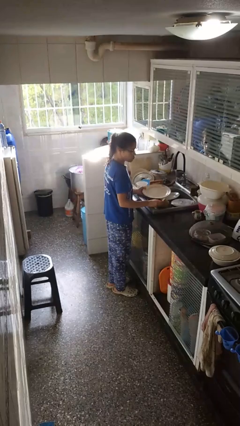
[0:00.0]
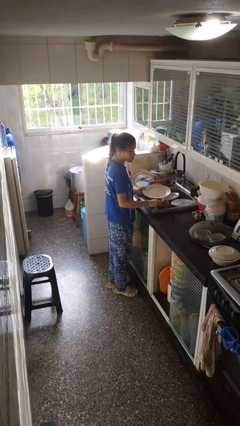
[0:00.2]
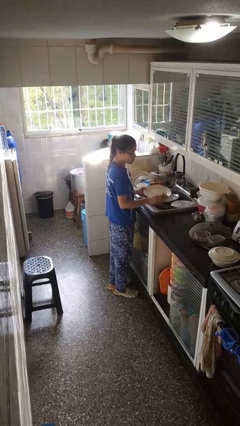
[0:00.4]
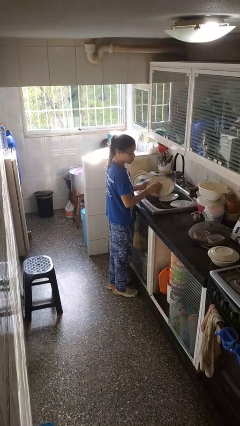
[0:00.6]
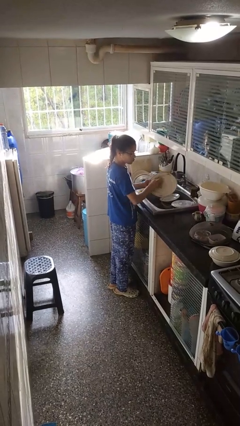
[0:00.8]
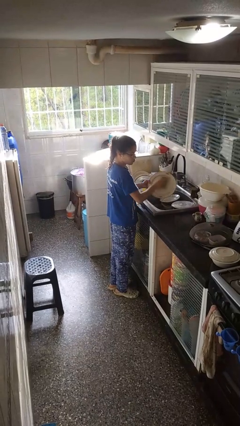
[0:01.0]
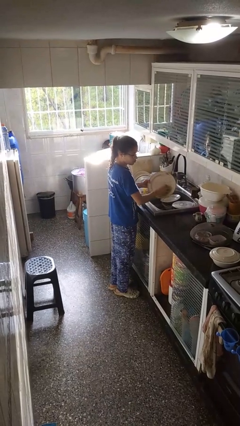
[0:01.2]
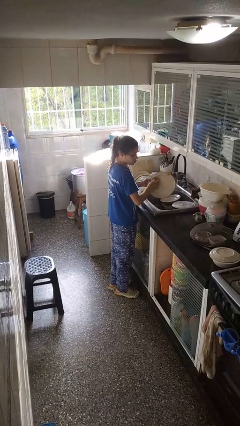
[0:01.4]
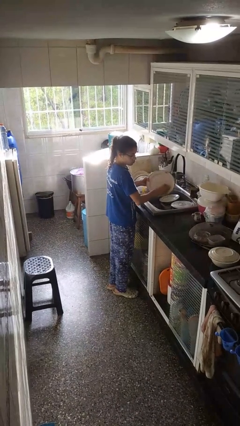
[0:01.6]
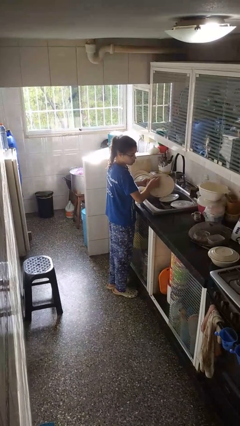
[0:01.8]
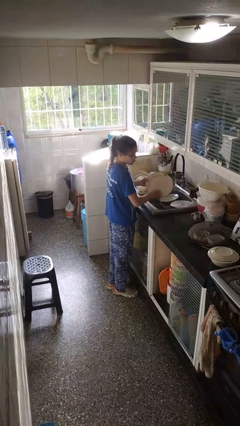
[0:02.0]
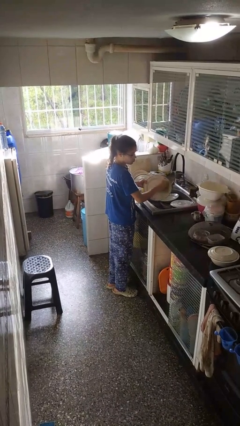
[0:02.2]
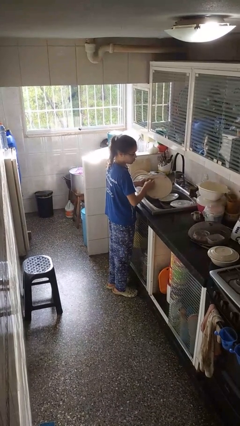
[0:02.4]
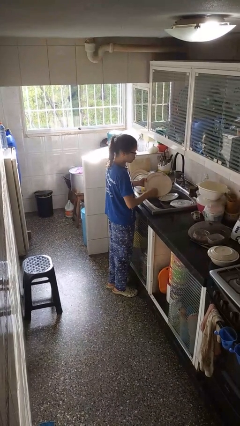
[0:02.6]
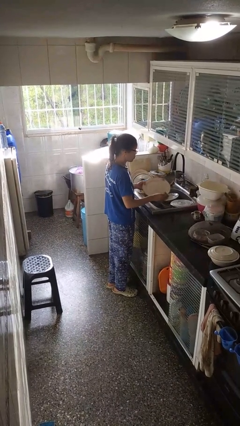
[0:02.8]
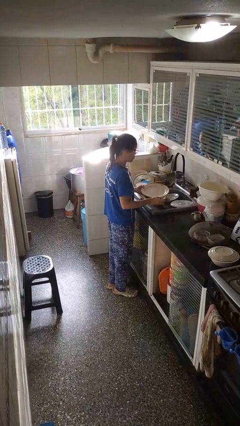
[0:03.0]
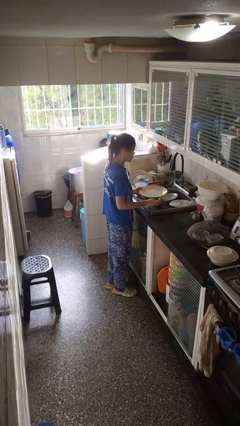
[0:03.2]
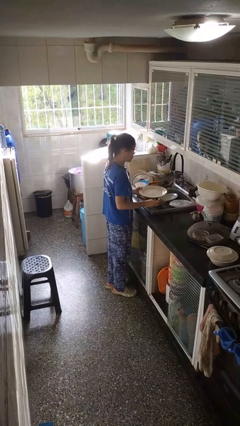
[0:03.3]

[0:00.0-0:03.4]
person washes dish

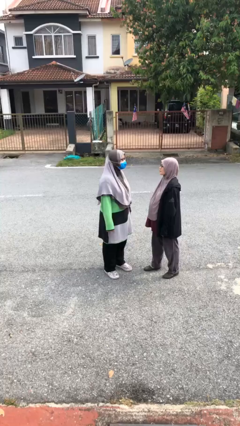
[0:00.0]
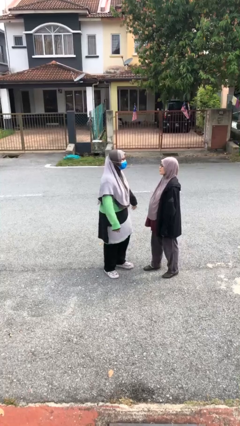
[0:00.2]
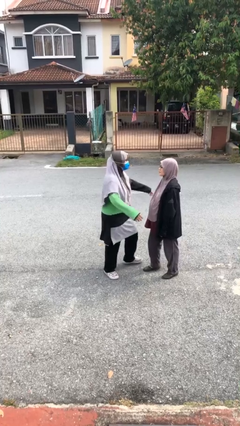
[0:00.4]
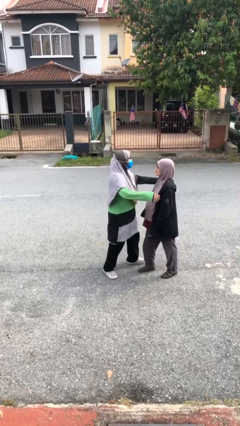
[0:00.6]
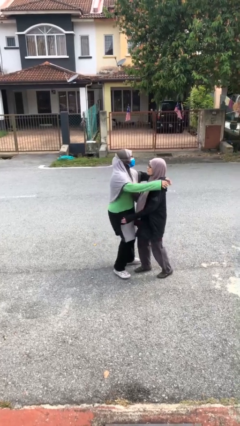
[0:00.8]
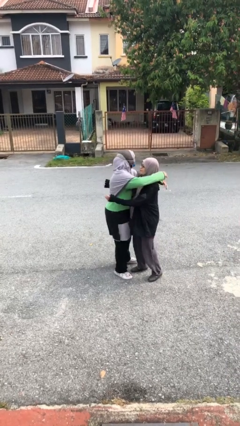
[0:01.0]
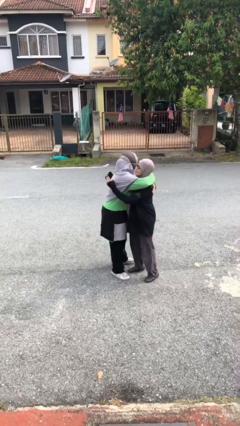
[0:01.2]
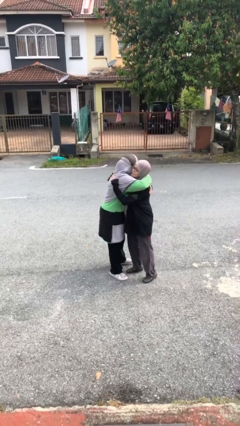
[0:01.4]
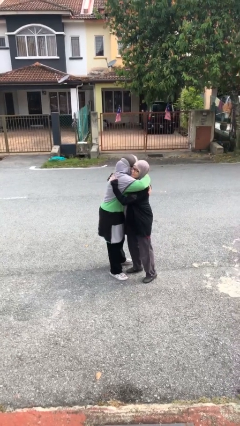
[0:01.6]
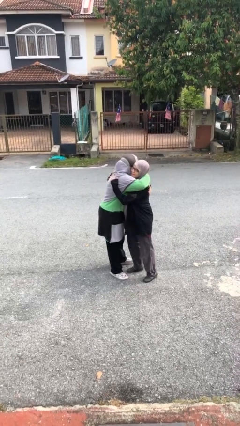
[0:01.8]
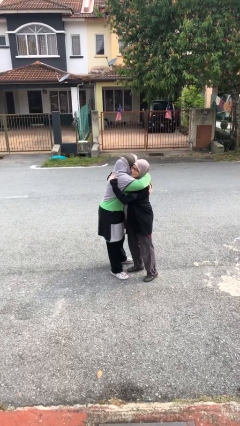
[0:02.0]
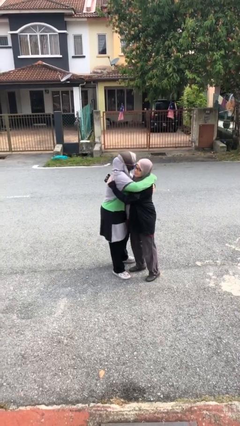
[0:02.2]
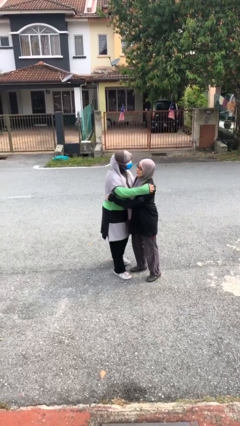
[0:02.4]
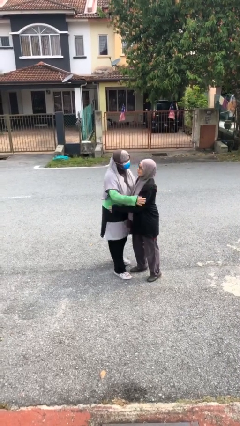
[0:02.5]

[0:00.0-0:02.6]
person embraces person

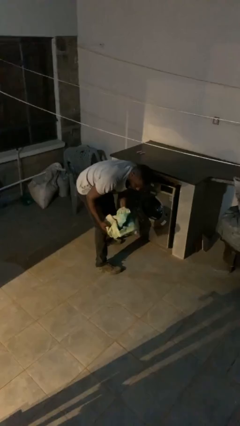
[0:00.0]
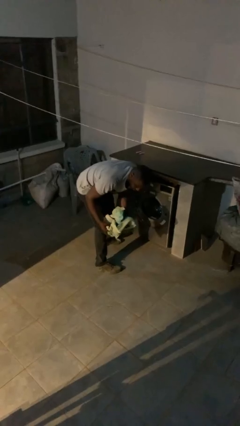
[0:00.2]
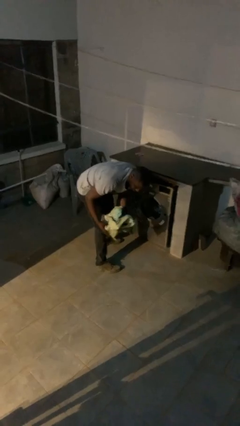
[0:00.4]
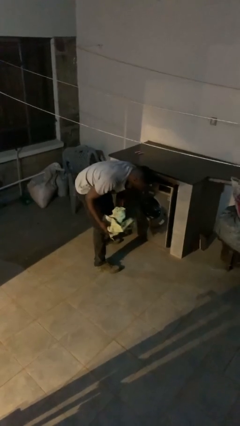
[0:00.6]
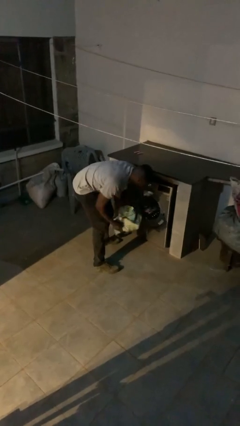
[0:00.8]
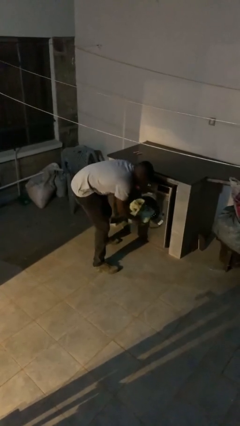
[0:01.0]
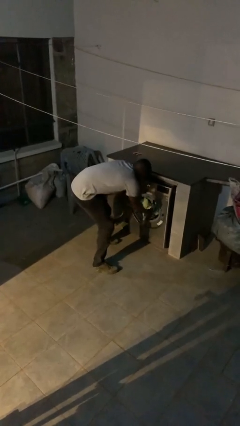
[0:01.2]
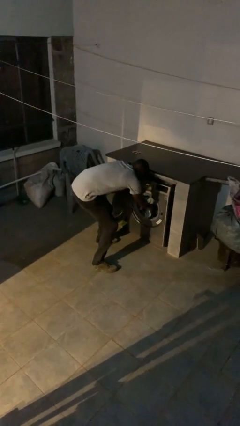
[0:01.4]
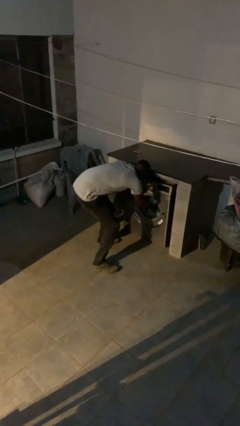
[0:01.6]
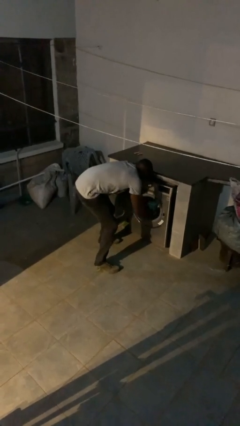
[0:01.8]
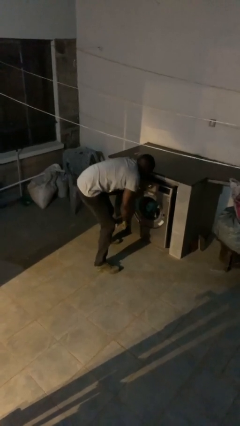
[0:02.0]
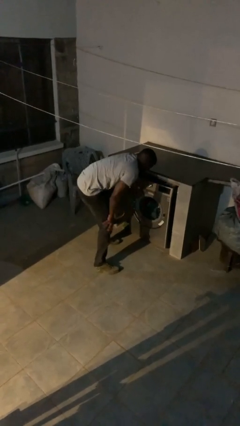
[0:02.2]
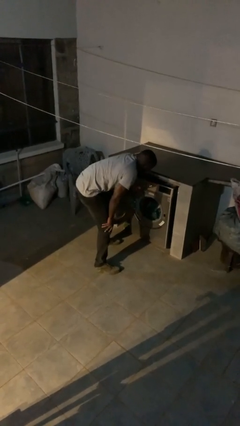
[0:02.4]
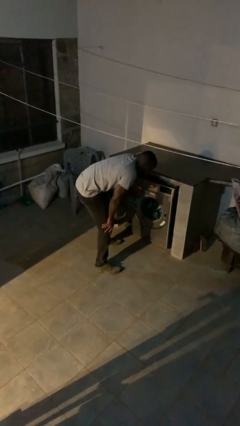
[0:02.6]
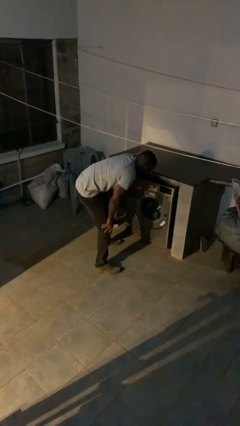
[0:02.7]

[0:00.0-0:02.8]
person loads clotheswasher

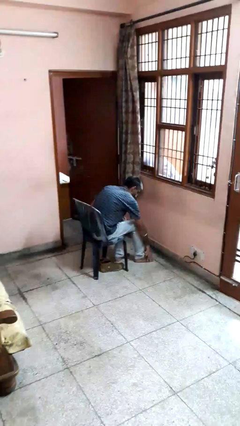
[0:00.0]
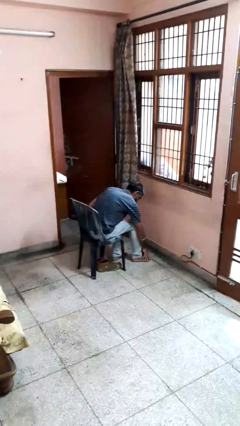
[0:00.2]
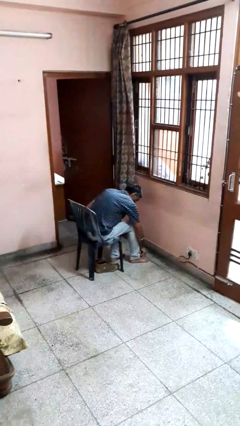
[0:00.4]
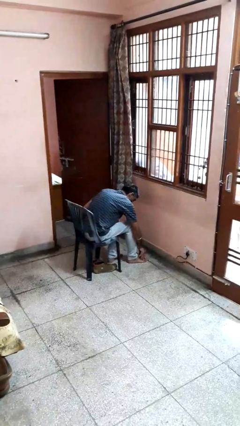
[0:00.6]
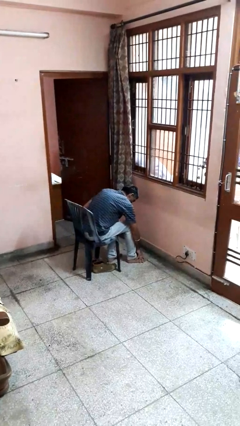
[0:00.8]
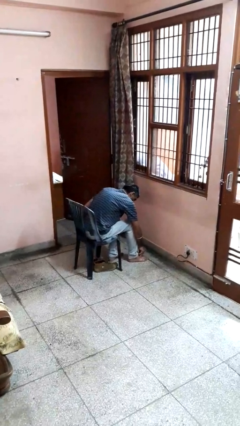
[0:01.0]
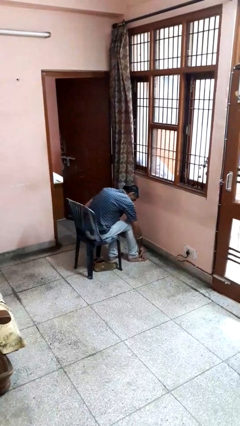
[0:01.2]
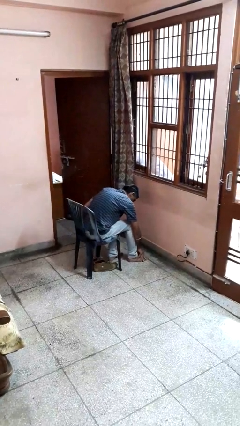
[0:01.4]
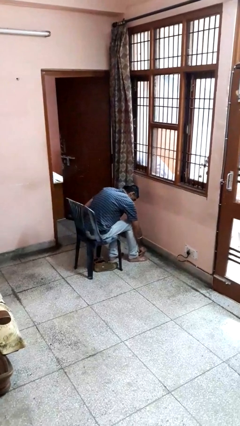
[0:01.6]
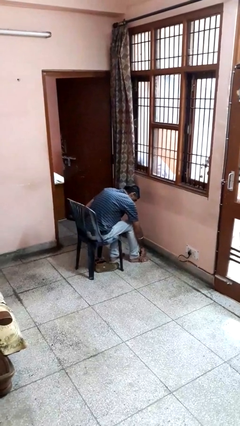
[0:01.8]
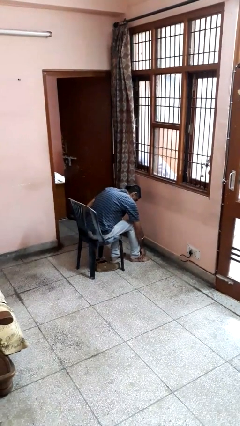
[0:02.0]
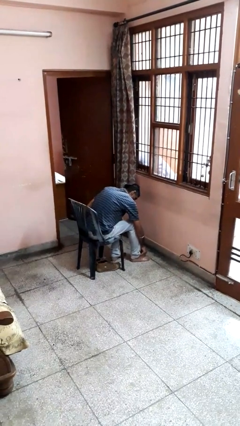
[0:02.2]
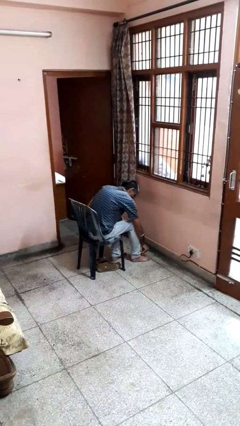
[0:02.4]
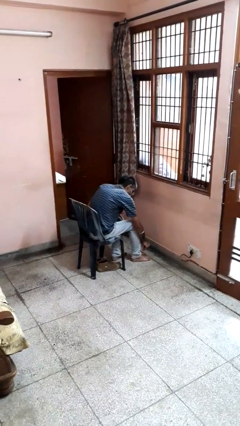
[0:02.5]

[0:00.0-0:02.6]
person rubs foot

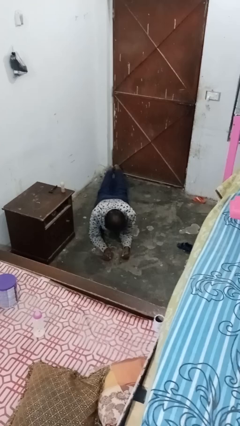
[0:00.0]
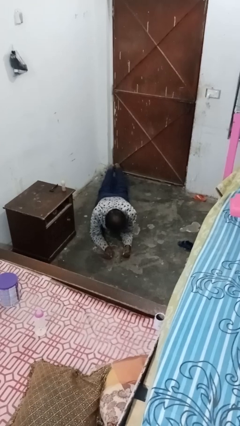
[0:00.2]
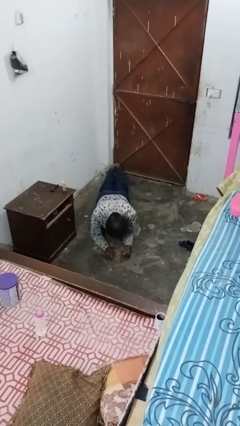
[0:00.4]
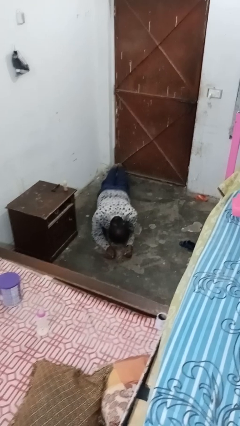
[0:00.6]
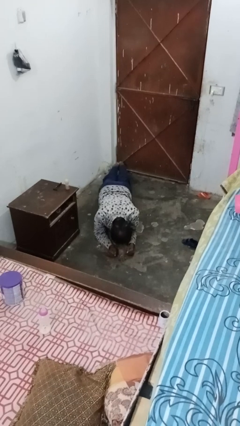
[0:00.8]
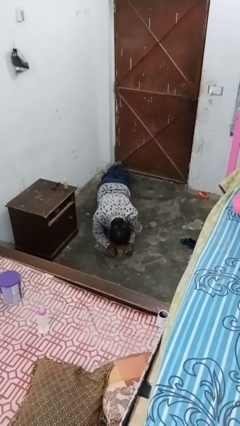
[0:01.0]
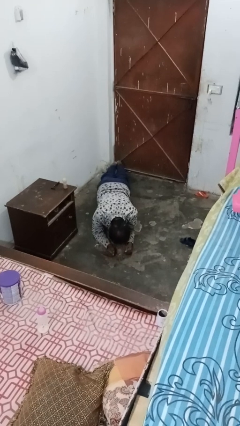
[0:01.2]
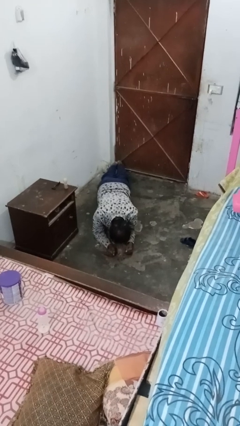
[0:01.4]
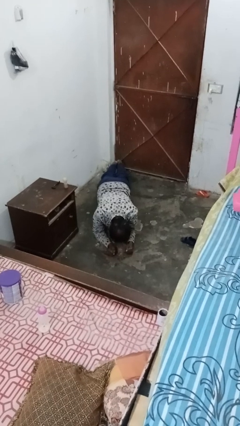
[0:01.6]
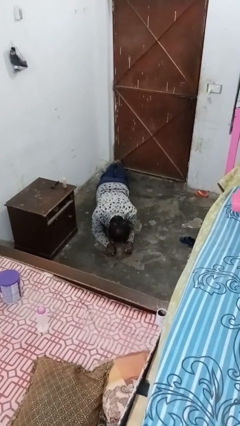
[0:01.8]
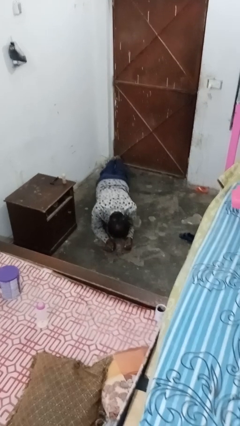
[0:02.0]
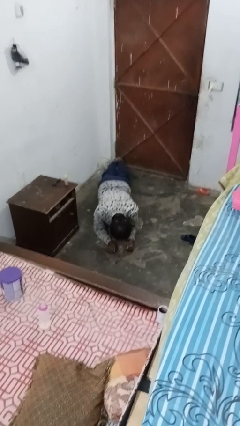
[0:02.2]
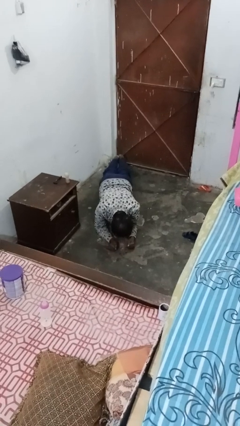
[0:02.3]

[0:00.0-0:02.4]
person exercises with plank

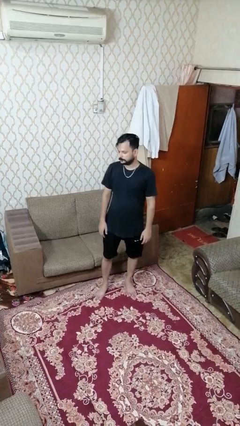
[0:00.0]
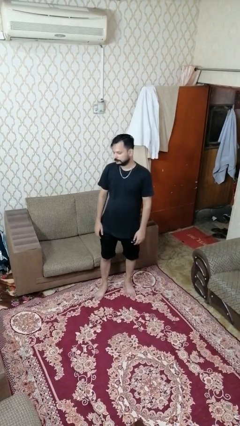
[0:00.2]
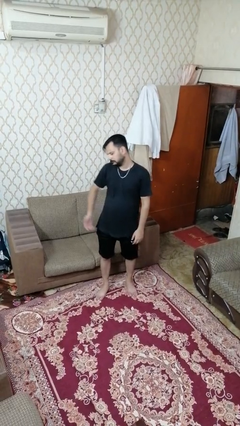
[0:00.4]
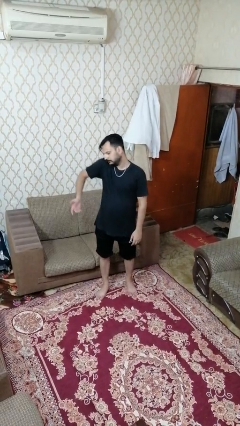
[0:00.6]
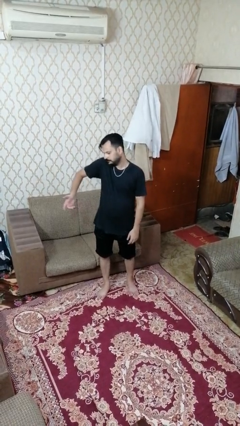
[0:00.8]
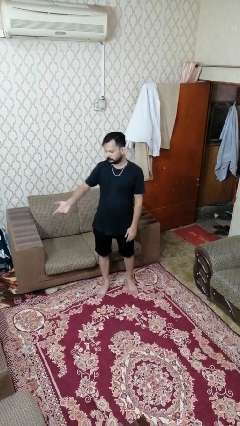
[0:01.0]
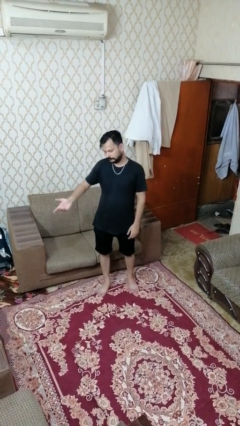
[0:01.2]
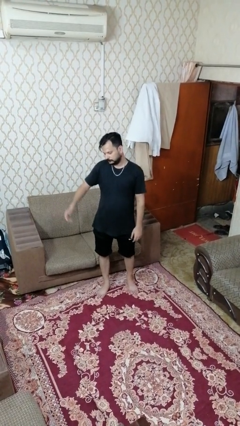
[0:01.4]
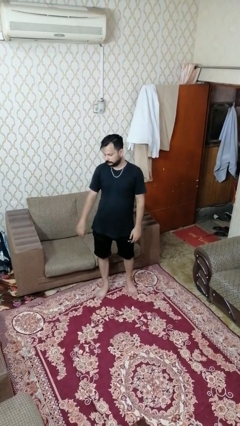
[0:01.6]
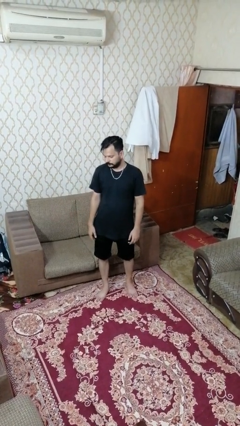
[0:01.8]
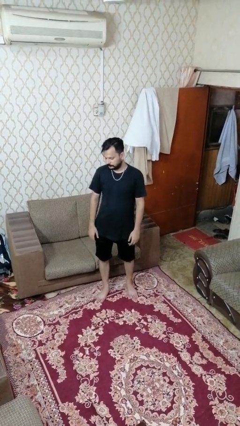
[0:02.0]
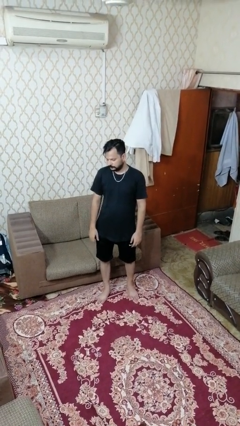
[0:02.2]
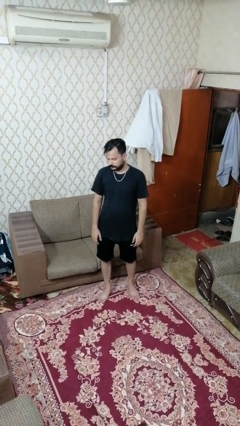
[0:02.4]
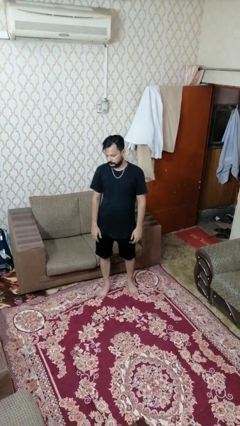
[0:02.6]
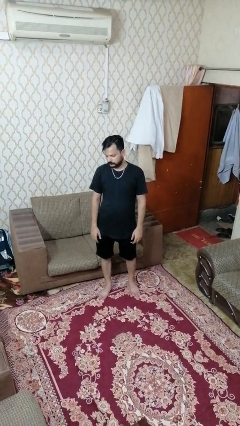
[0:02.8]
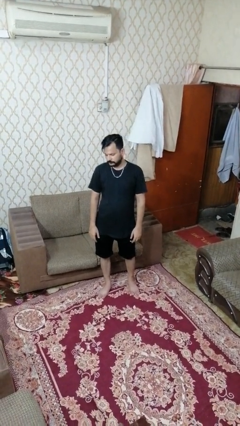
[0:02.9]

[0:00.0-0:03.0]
person shrugs

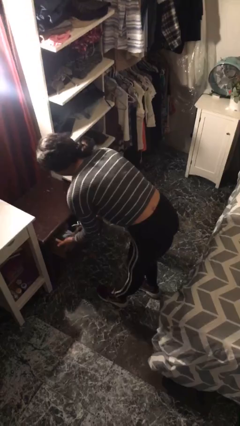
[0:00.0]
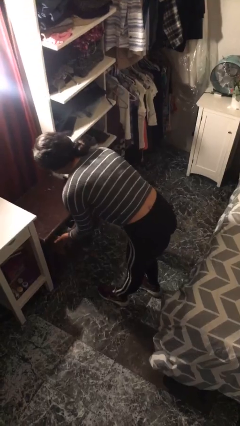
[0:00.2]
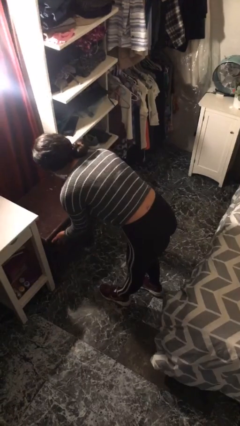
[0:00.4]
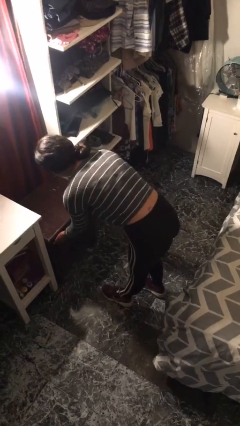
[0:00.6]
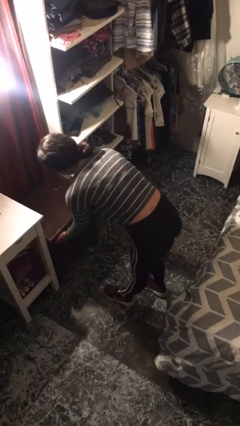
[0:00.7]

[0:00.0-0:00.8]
person closes dresser drawer
